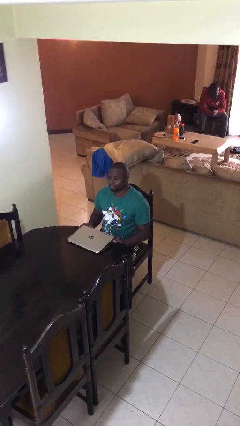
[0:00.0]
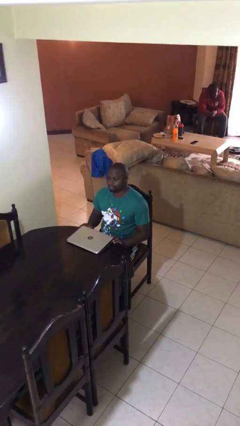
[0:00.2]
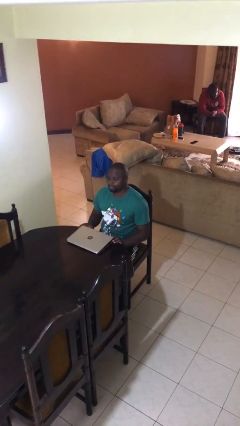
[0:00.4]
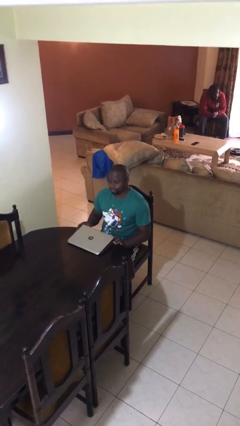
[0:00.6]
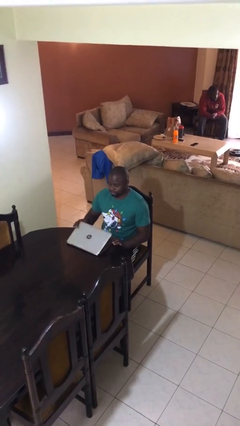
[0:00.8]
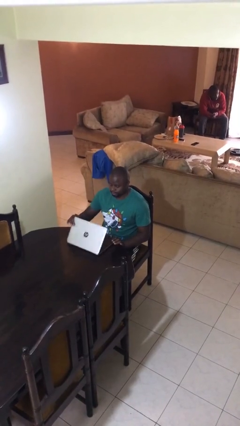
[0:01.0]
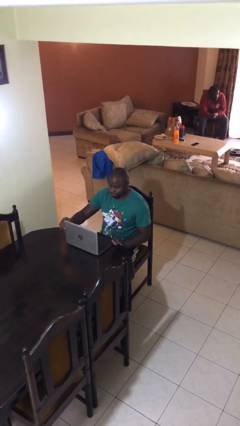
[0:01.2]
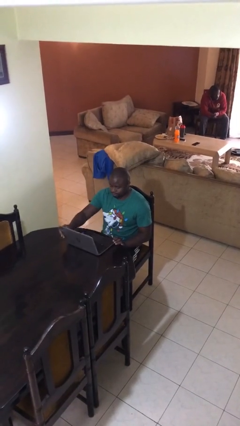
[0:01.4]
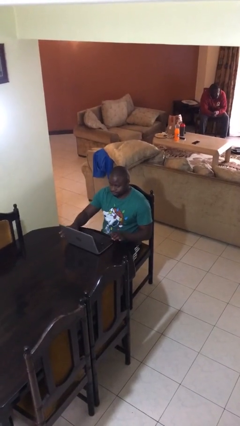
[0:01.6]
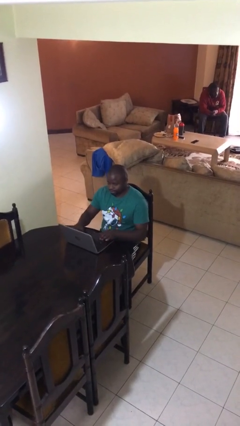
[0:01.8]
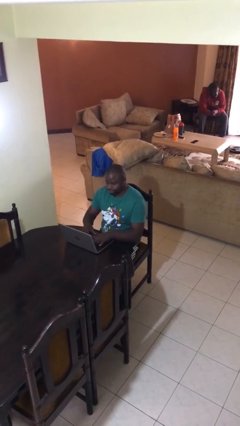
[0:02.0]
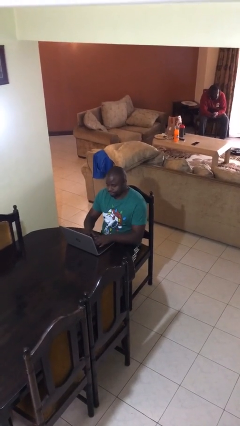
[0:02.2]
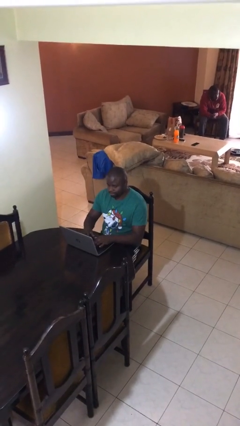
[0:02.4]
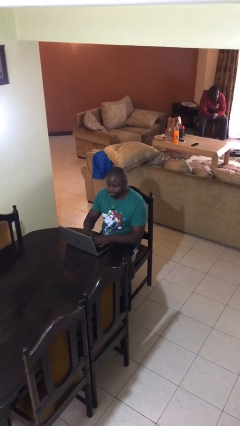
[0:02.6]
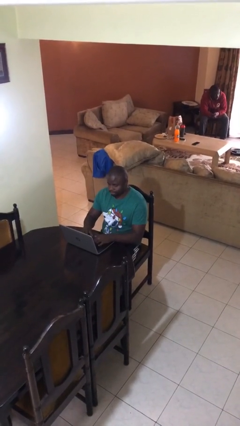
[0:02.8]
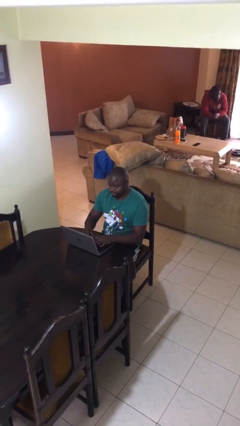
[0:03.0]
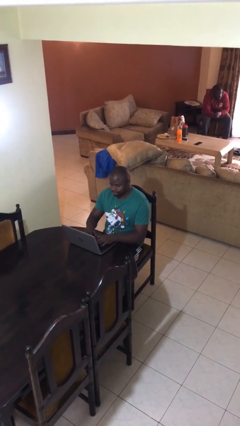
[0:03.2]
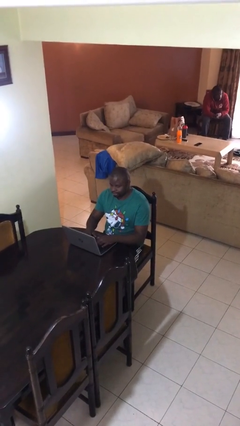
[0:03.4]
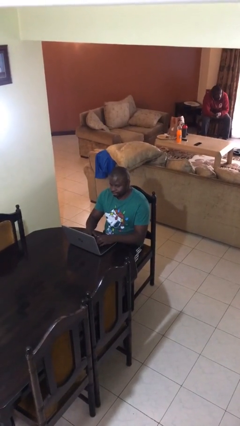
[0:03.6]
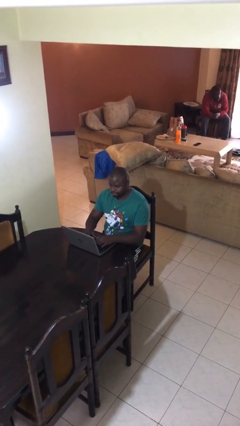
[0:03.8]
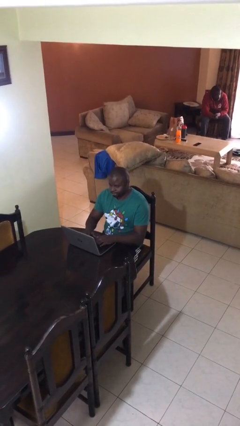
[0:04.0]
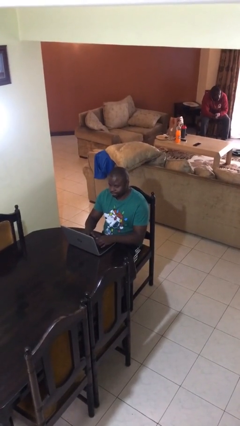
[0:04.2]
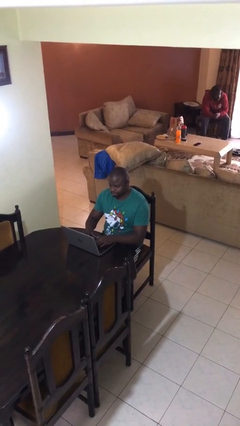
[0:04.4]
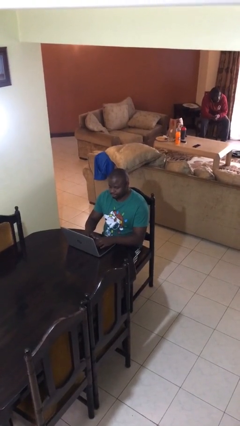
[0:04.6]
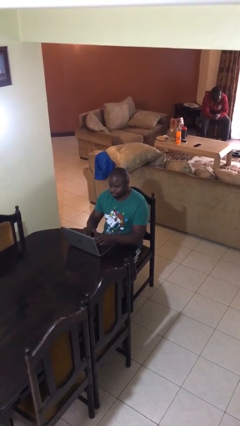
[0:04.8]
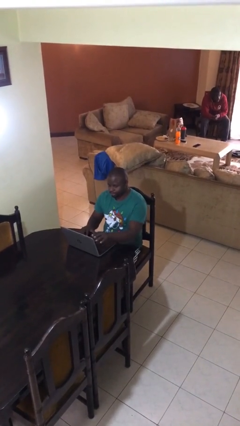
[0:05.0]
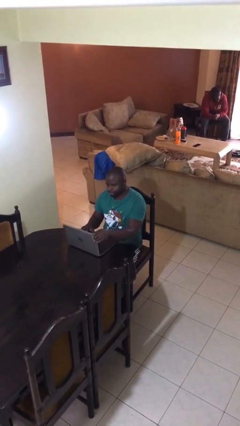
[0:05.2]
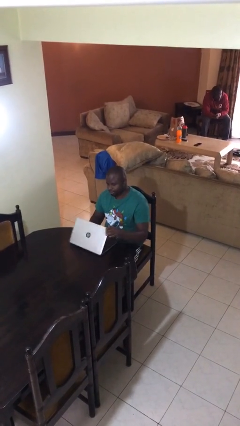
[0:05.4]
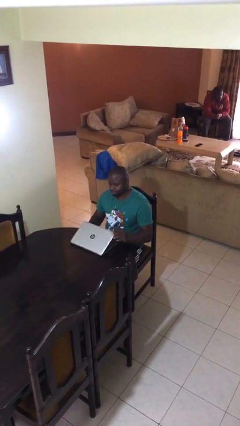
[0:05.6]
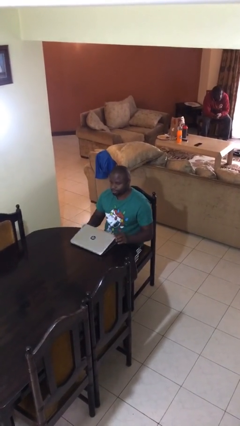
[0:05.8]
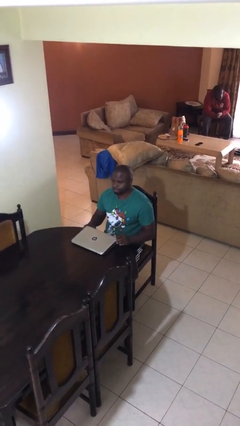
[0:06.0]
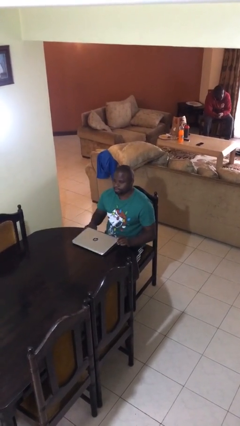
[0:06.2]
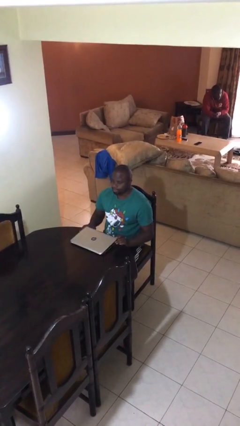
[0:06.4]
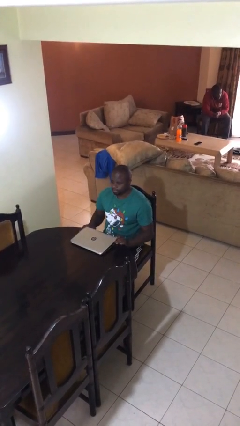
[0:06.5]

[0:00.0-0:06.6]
person interacts with laptop

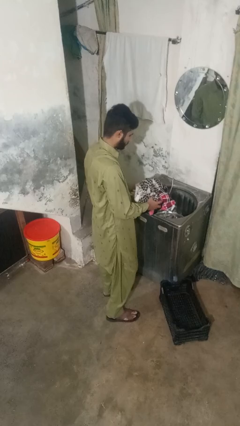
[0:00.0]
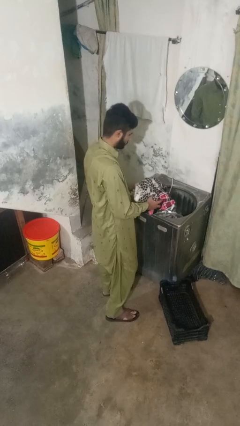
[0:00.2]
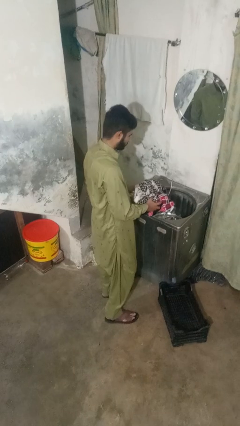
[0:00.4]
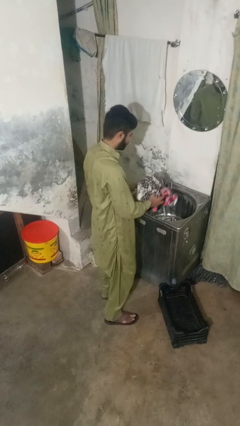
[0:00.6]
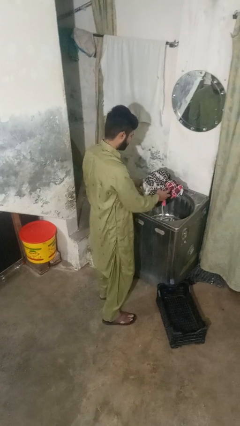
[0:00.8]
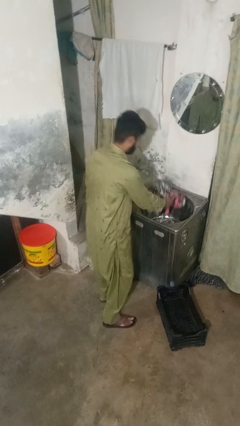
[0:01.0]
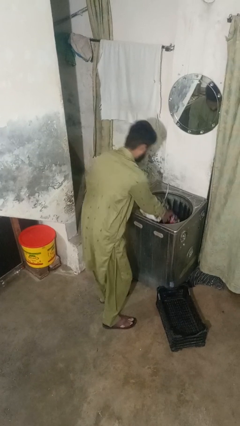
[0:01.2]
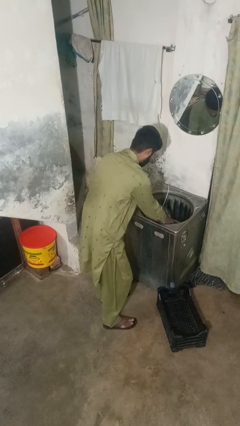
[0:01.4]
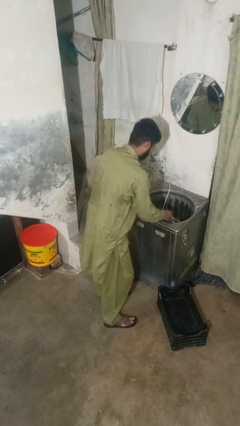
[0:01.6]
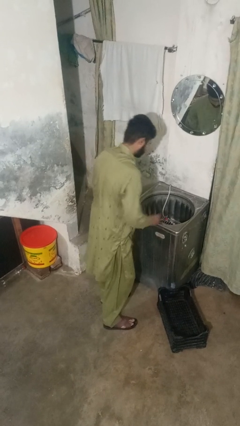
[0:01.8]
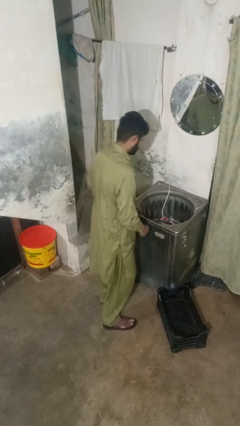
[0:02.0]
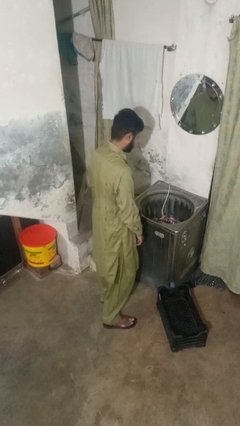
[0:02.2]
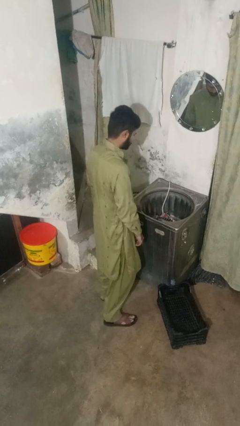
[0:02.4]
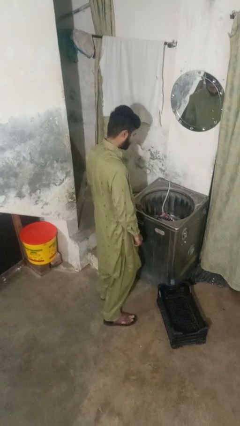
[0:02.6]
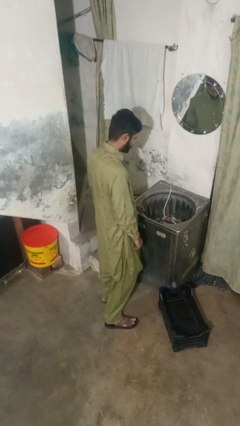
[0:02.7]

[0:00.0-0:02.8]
person loads clotheswasher

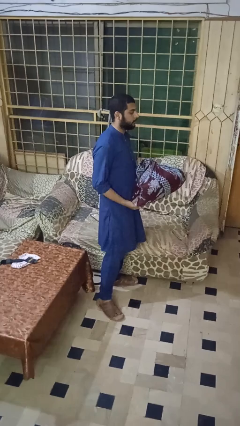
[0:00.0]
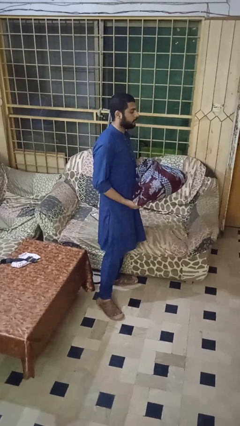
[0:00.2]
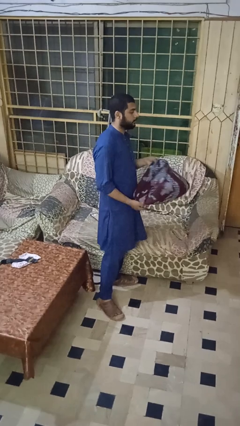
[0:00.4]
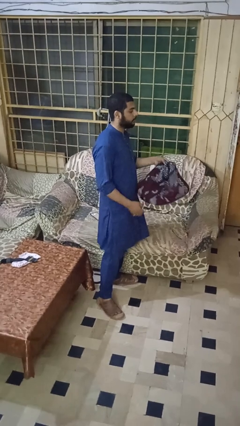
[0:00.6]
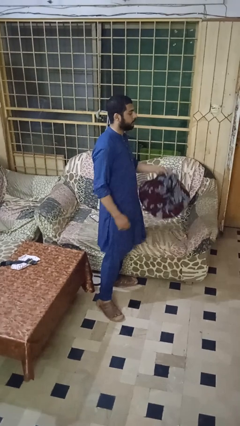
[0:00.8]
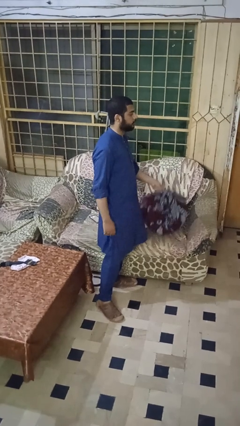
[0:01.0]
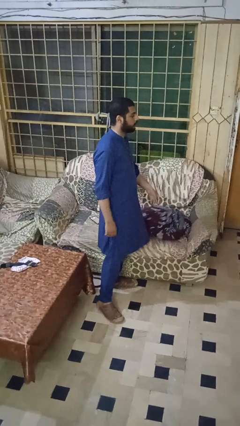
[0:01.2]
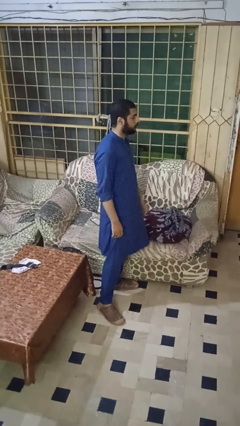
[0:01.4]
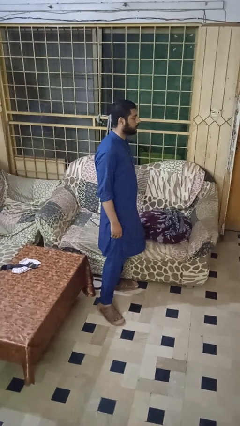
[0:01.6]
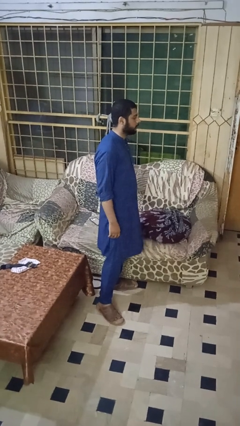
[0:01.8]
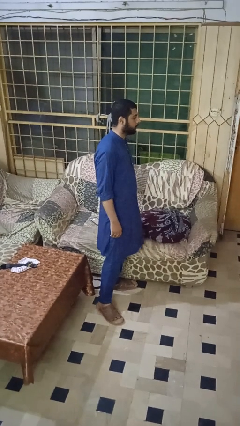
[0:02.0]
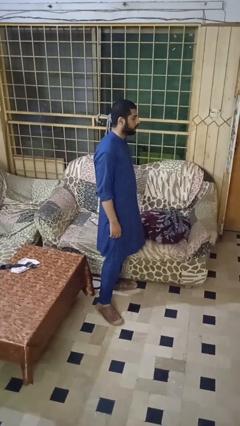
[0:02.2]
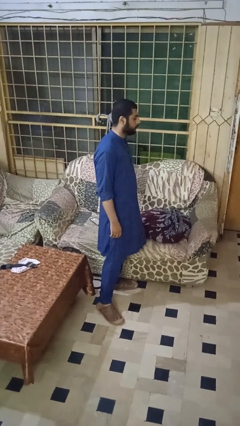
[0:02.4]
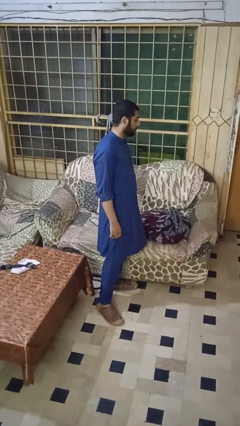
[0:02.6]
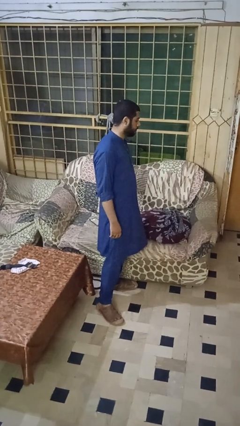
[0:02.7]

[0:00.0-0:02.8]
person puts down object on couch

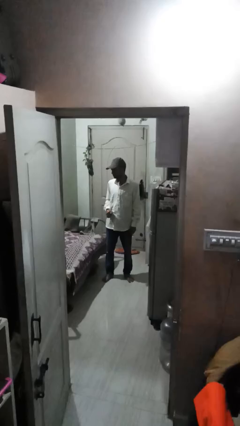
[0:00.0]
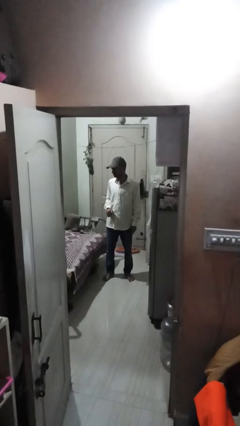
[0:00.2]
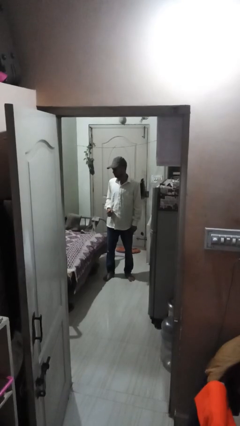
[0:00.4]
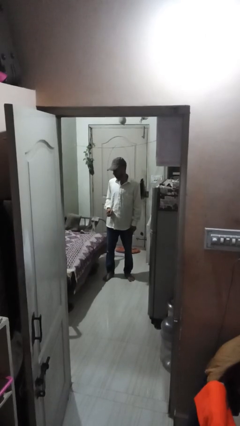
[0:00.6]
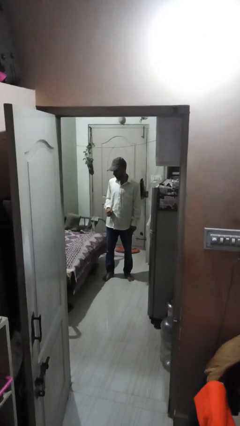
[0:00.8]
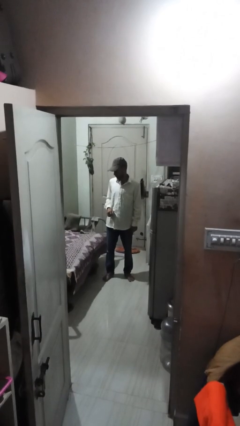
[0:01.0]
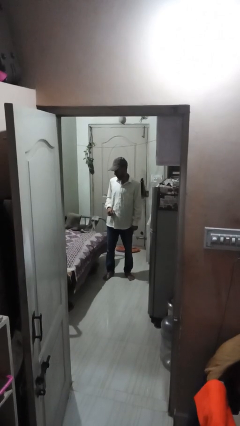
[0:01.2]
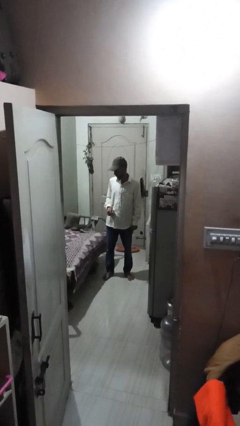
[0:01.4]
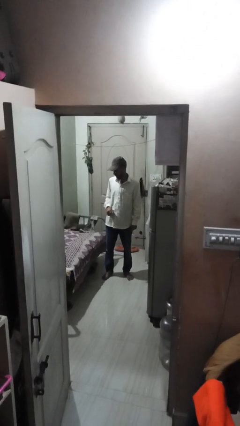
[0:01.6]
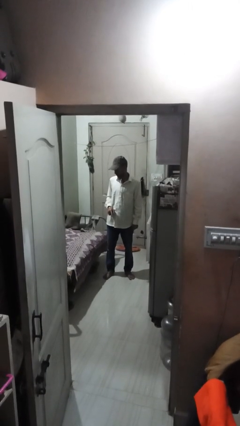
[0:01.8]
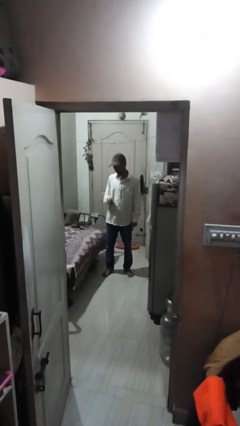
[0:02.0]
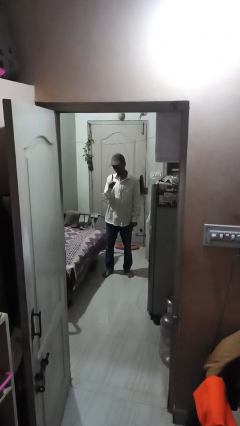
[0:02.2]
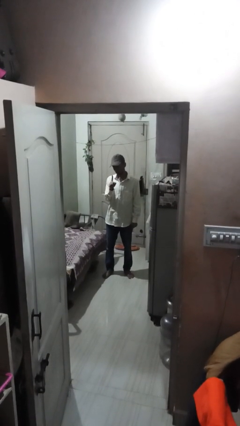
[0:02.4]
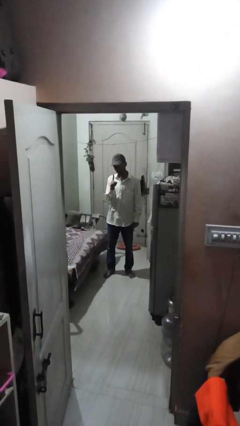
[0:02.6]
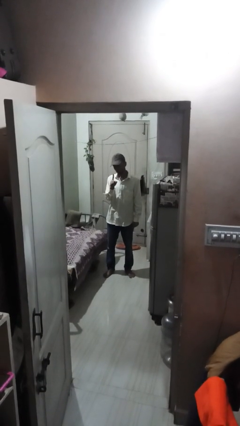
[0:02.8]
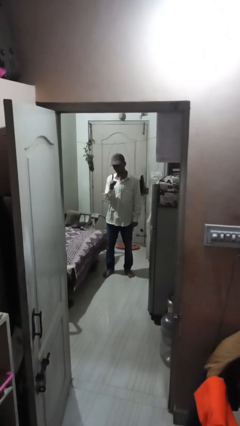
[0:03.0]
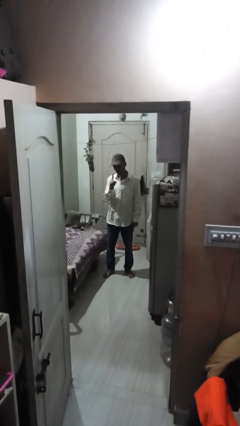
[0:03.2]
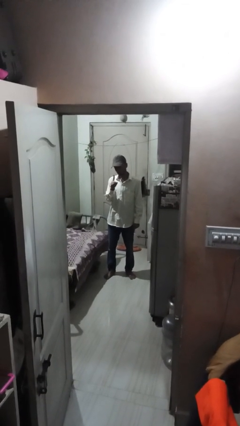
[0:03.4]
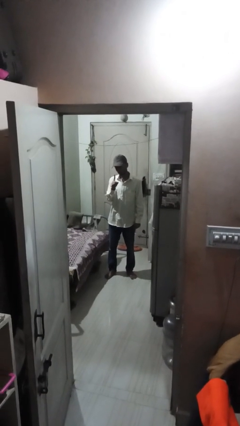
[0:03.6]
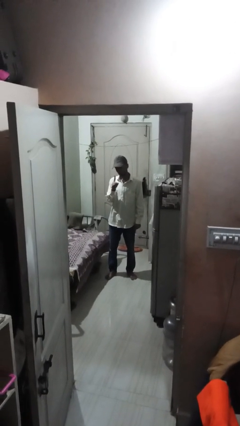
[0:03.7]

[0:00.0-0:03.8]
person gestures number one

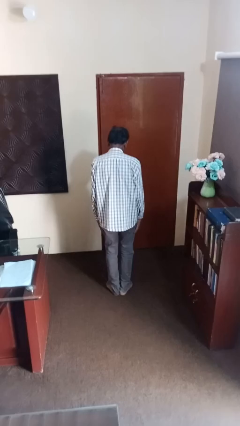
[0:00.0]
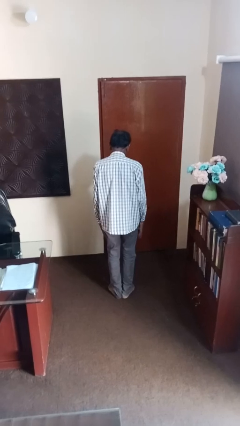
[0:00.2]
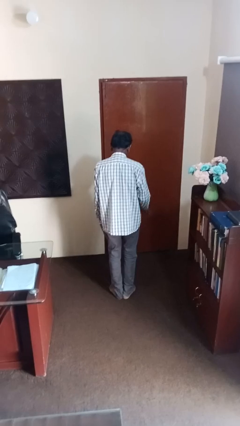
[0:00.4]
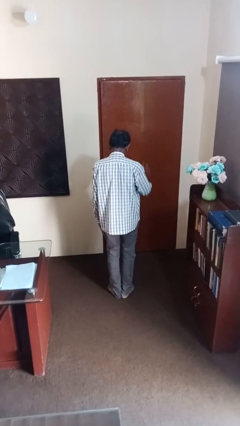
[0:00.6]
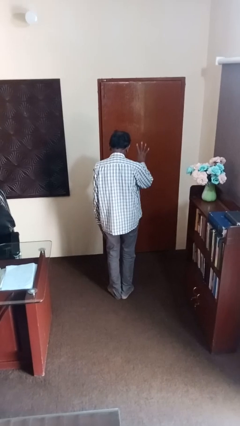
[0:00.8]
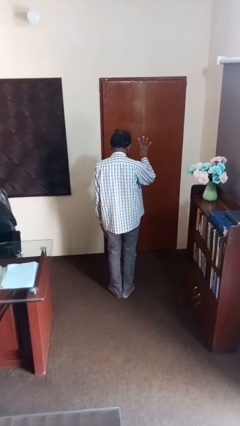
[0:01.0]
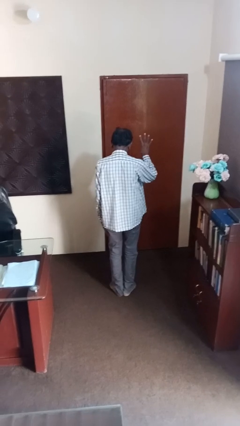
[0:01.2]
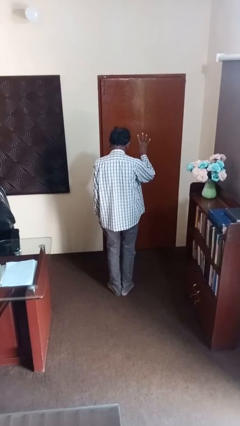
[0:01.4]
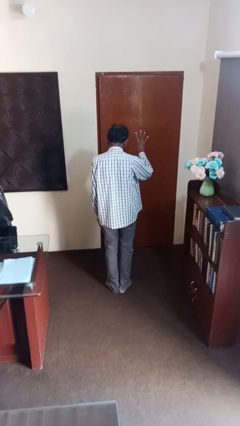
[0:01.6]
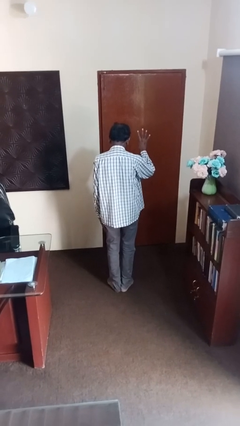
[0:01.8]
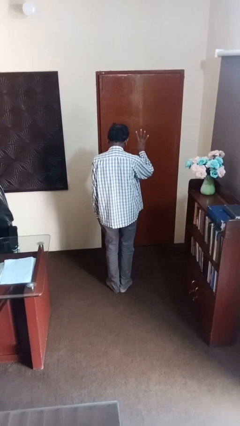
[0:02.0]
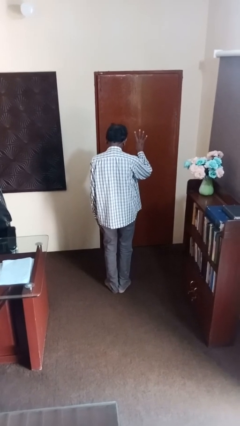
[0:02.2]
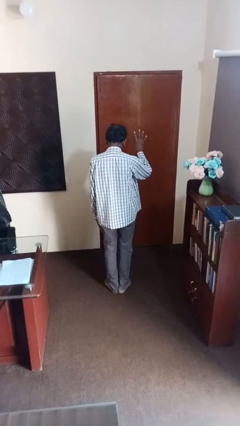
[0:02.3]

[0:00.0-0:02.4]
person gestures number four
